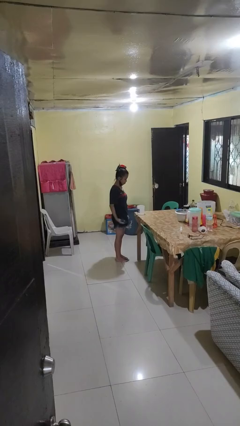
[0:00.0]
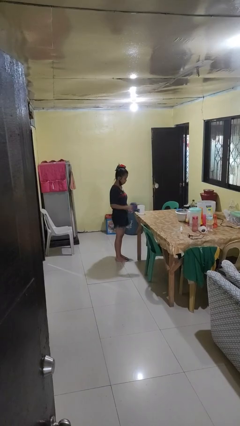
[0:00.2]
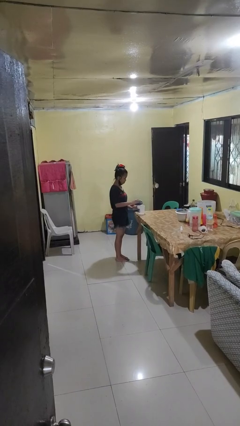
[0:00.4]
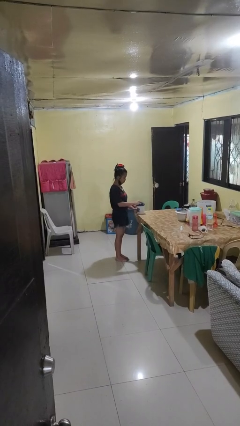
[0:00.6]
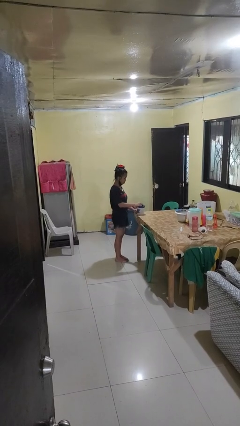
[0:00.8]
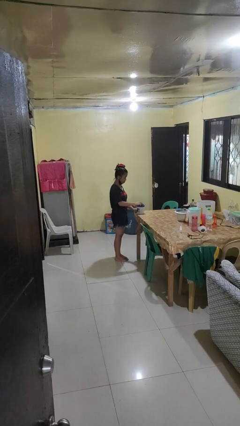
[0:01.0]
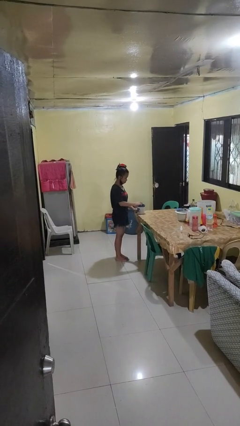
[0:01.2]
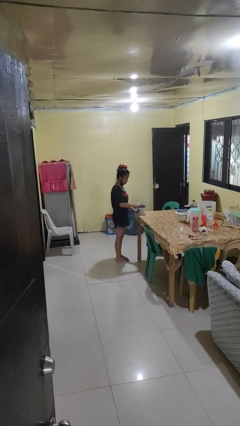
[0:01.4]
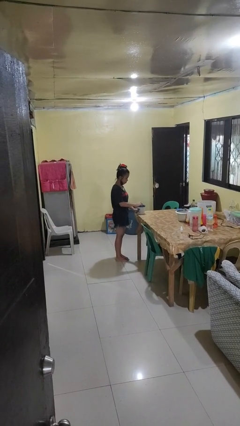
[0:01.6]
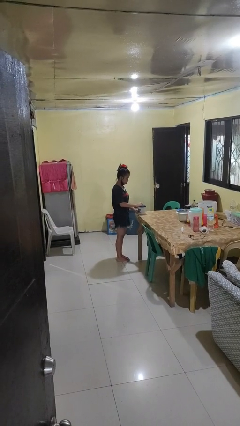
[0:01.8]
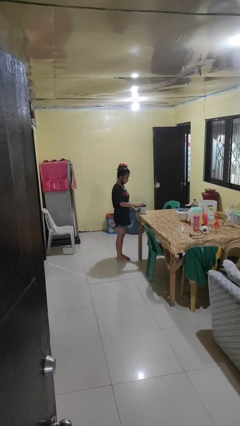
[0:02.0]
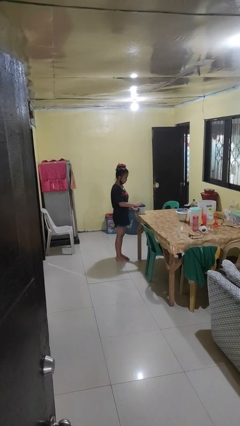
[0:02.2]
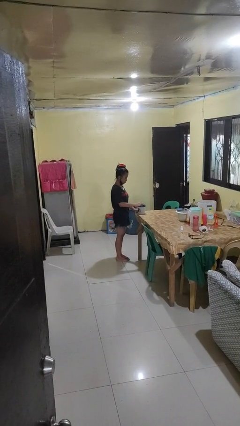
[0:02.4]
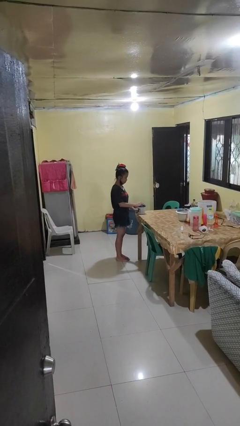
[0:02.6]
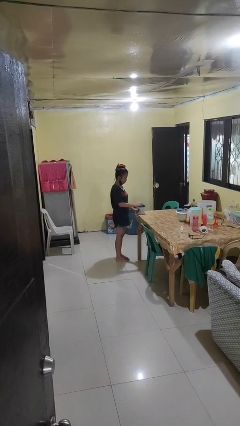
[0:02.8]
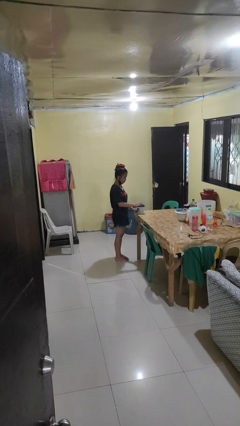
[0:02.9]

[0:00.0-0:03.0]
person closes jar

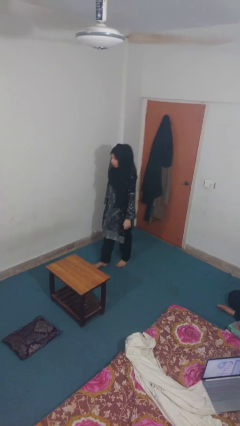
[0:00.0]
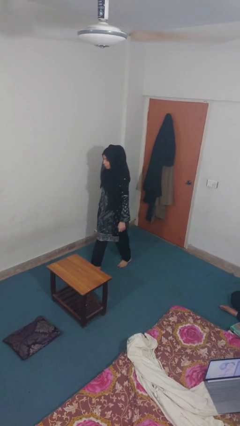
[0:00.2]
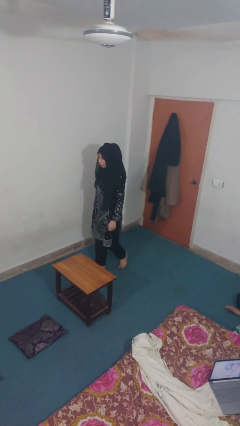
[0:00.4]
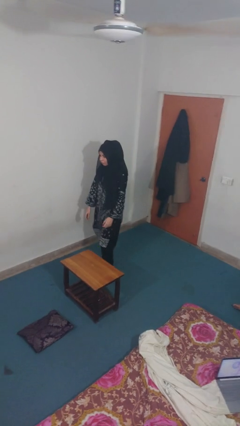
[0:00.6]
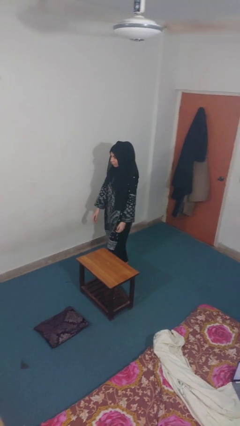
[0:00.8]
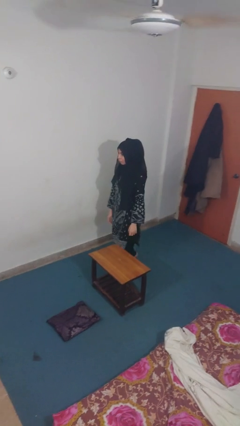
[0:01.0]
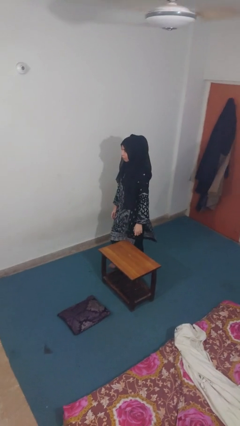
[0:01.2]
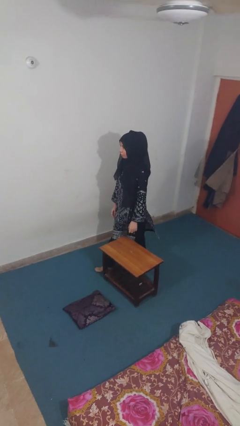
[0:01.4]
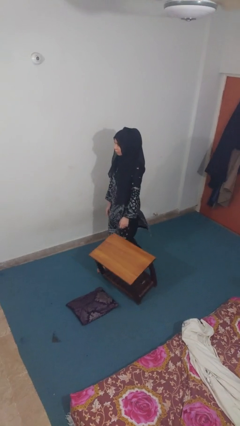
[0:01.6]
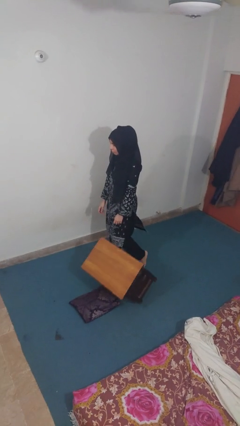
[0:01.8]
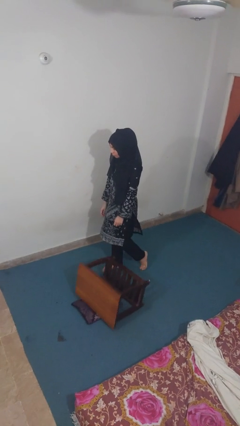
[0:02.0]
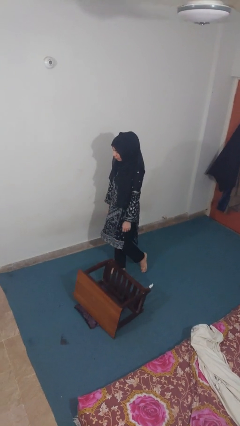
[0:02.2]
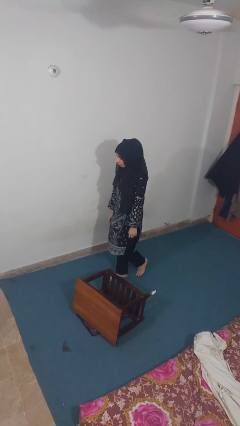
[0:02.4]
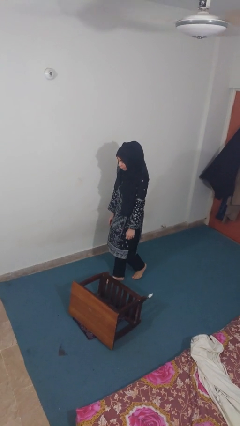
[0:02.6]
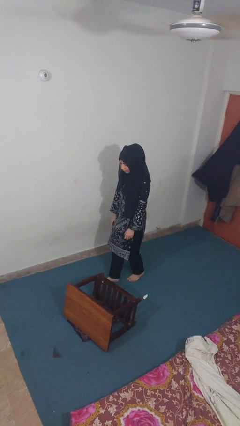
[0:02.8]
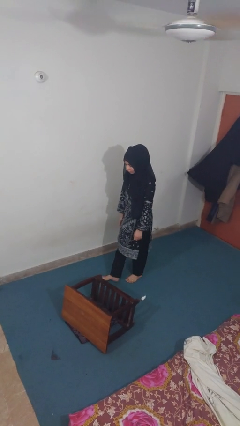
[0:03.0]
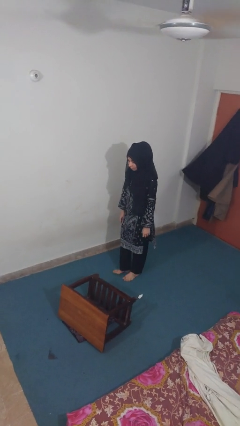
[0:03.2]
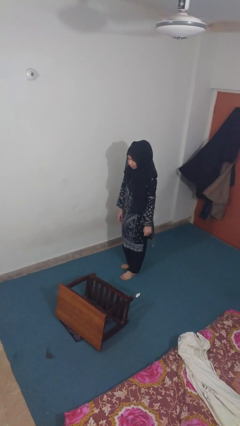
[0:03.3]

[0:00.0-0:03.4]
person knocks over furniture

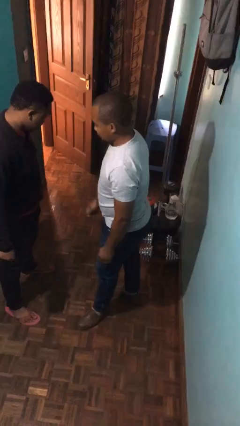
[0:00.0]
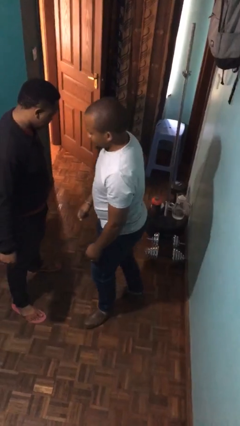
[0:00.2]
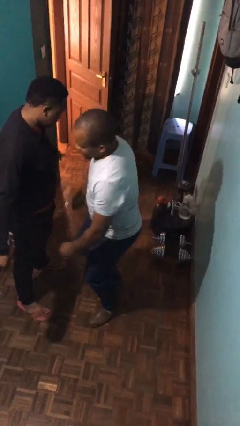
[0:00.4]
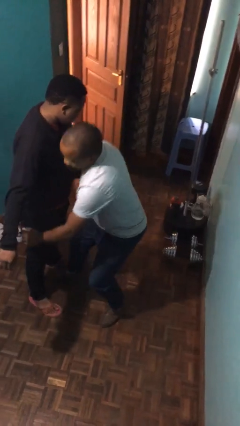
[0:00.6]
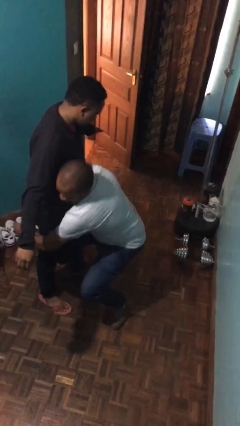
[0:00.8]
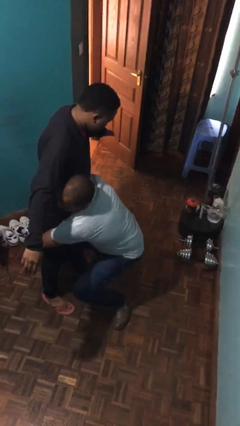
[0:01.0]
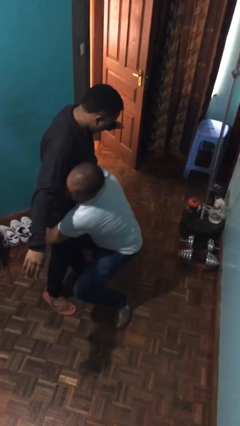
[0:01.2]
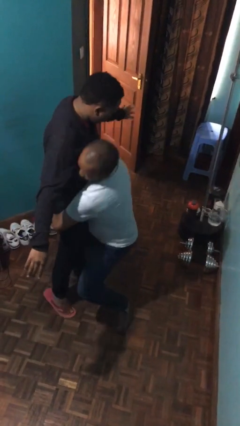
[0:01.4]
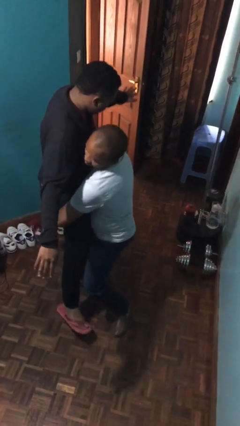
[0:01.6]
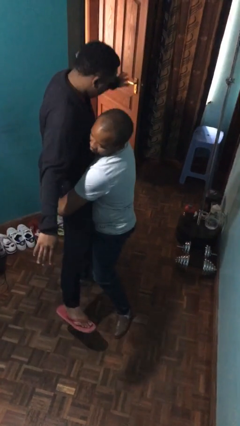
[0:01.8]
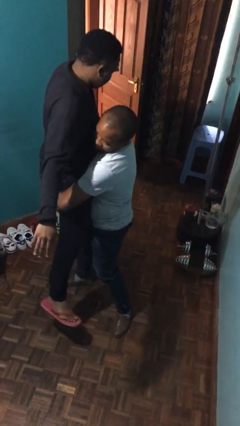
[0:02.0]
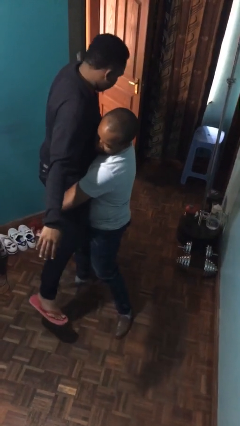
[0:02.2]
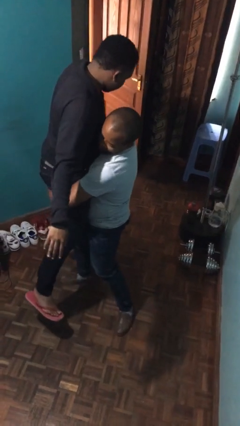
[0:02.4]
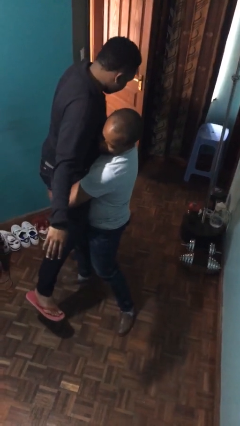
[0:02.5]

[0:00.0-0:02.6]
person picks up person

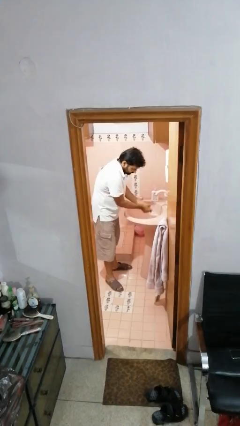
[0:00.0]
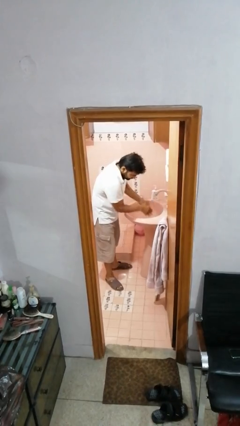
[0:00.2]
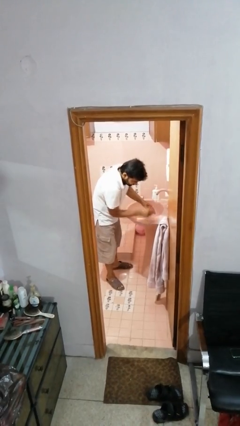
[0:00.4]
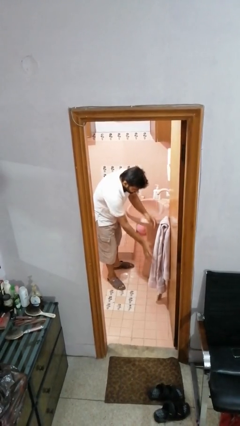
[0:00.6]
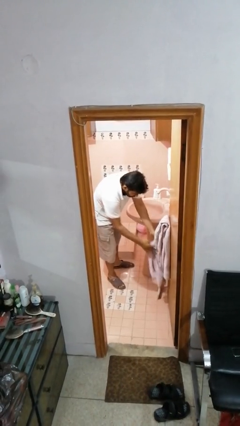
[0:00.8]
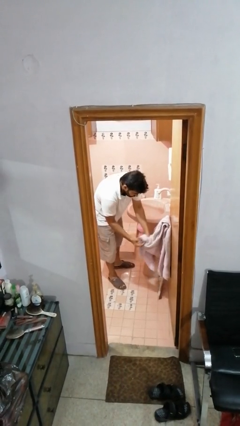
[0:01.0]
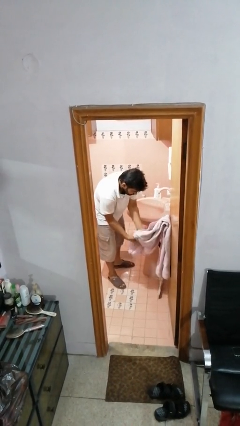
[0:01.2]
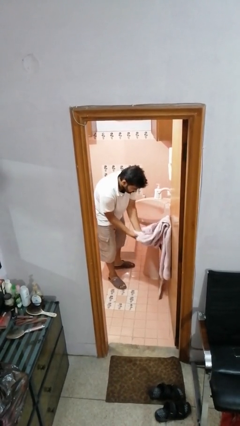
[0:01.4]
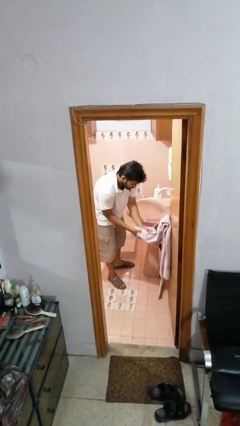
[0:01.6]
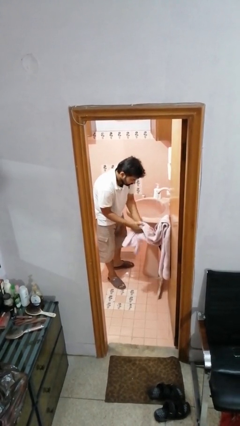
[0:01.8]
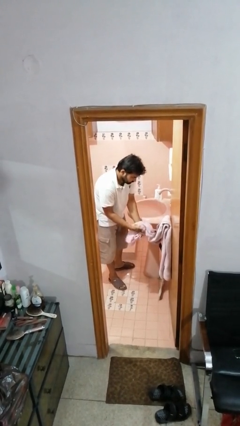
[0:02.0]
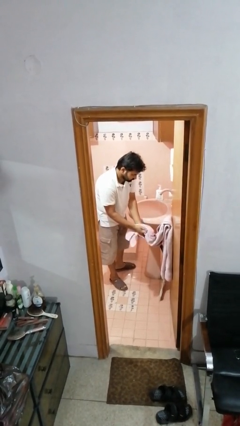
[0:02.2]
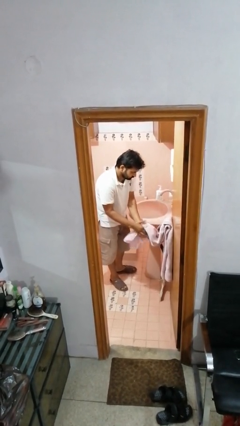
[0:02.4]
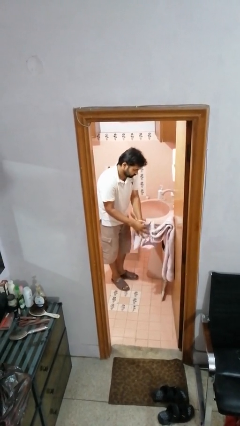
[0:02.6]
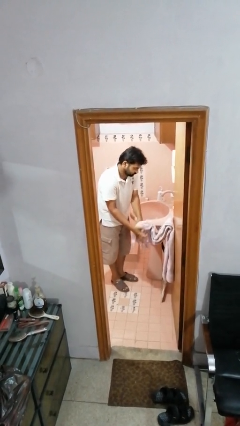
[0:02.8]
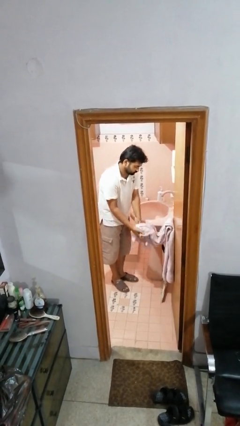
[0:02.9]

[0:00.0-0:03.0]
person dries hands with towel

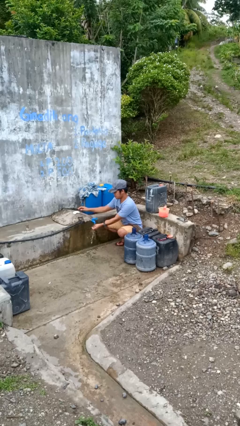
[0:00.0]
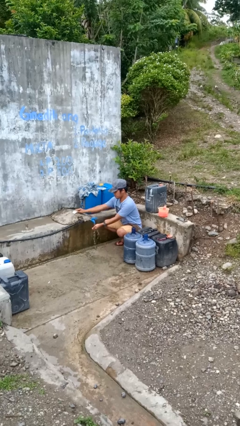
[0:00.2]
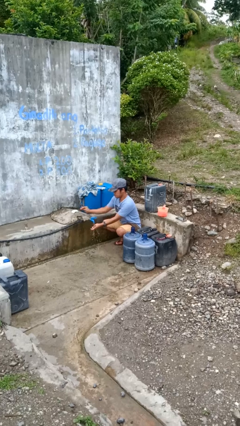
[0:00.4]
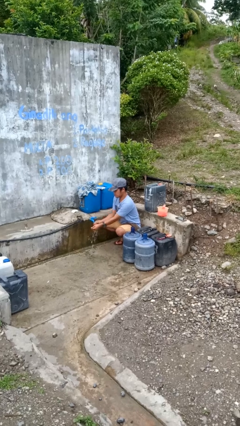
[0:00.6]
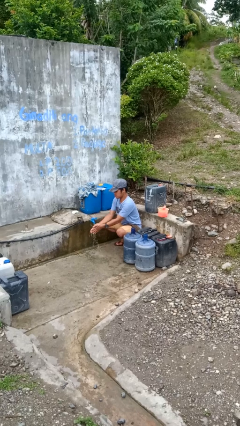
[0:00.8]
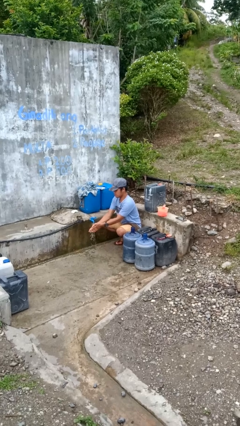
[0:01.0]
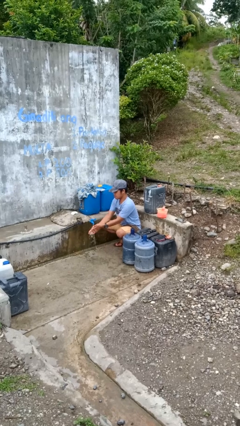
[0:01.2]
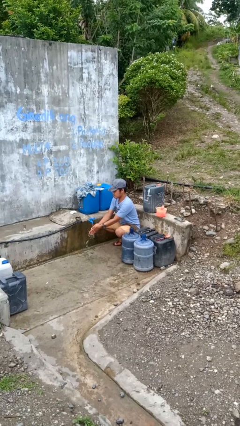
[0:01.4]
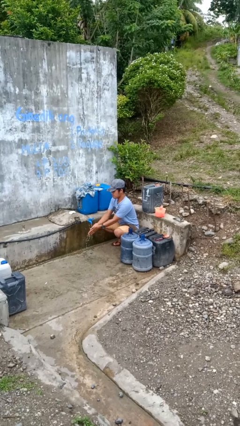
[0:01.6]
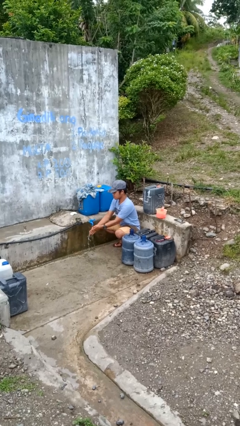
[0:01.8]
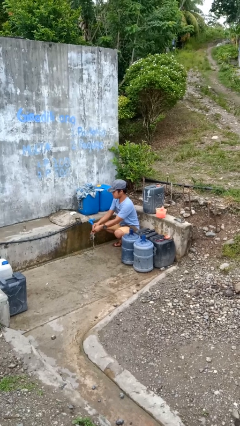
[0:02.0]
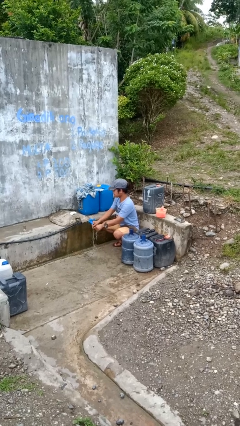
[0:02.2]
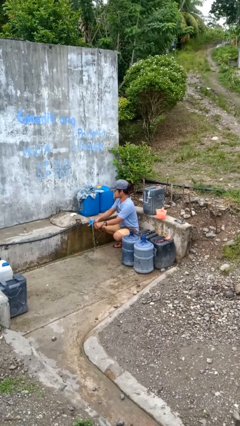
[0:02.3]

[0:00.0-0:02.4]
person washes hands

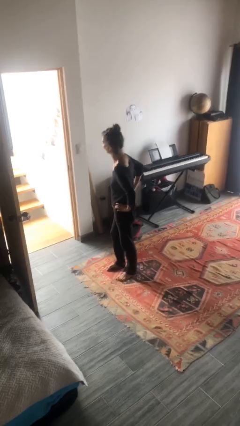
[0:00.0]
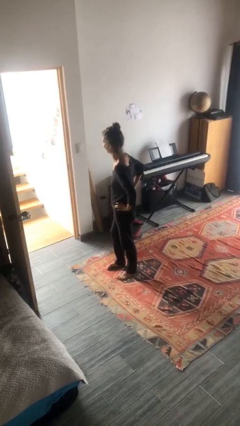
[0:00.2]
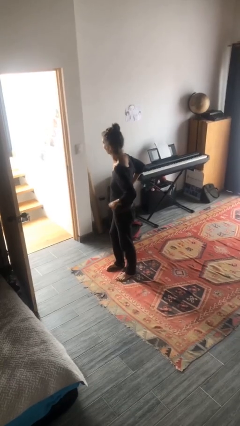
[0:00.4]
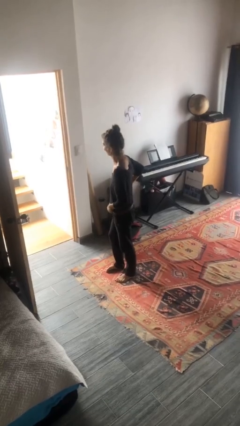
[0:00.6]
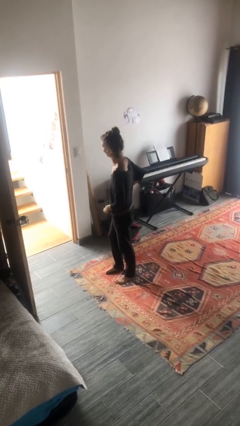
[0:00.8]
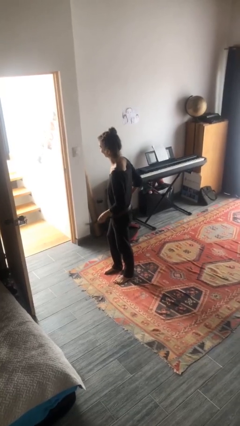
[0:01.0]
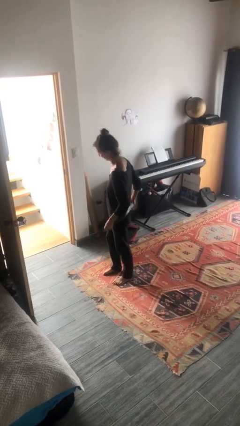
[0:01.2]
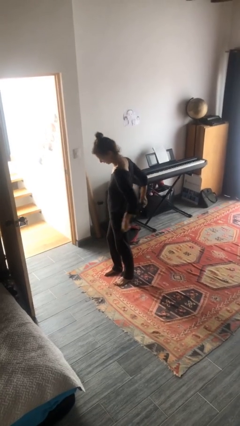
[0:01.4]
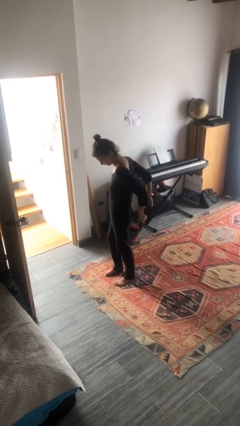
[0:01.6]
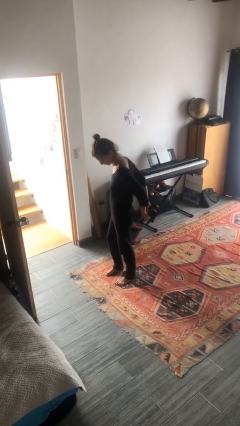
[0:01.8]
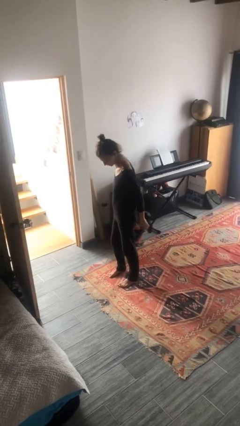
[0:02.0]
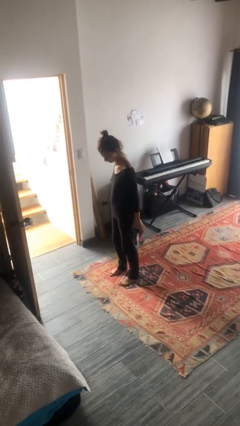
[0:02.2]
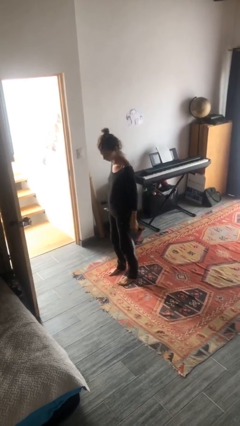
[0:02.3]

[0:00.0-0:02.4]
person takes off belt

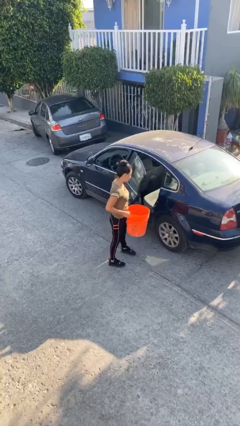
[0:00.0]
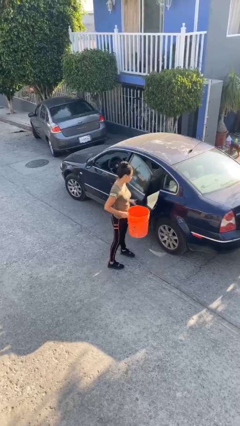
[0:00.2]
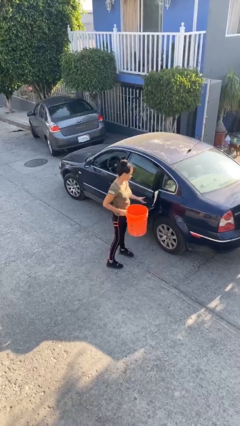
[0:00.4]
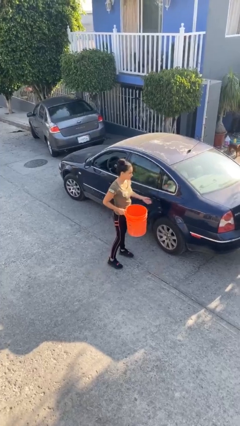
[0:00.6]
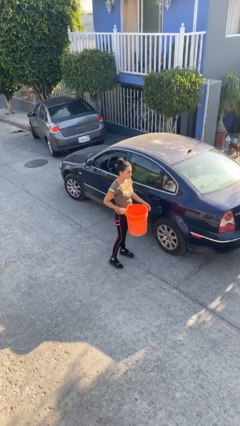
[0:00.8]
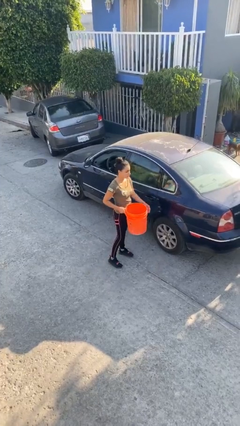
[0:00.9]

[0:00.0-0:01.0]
person closes car door
